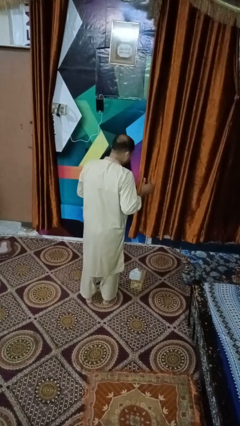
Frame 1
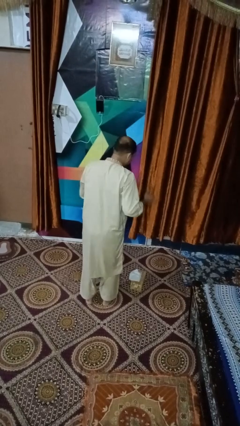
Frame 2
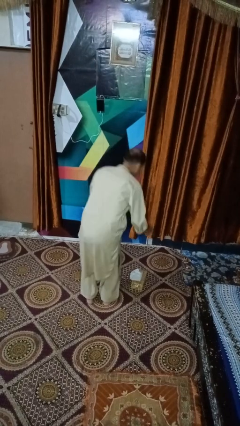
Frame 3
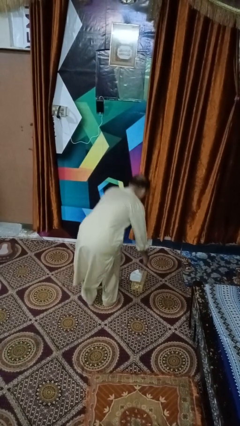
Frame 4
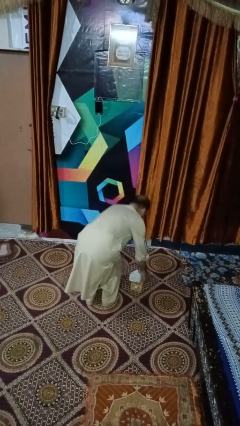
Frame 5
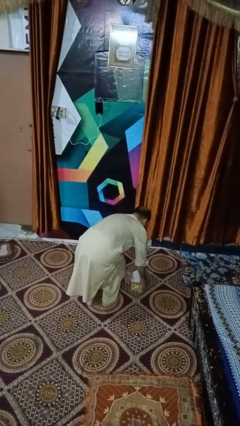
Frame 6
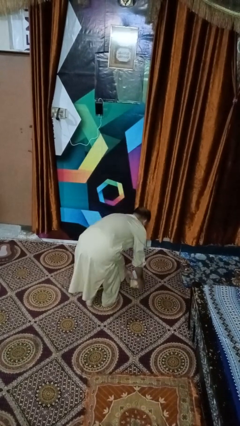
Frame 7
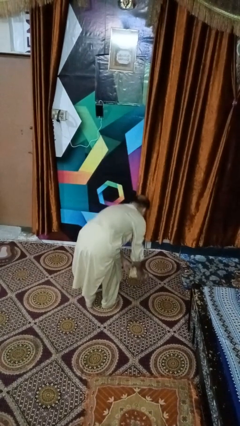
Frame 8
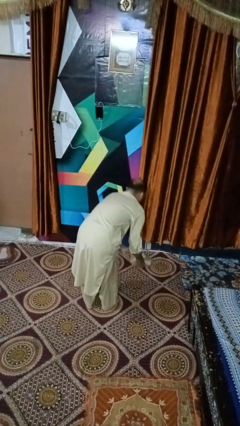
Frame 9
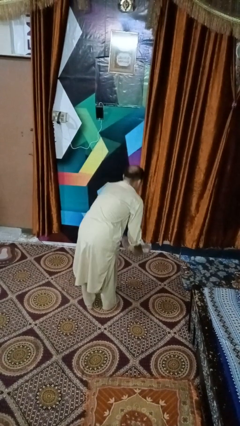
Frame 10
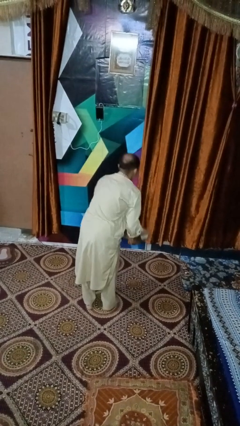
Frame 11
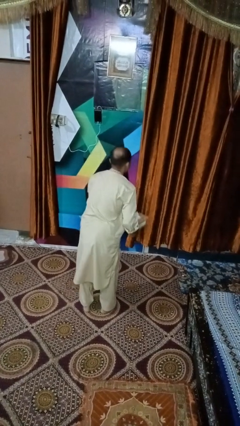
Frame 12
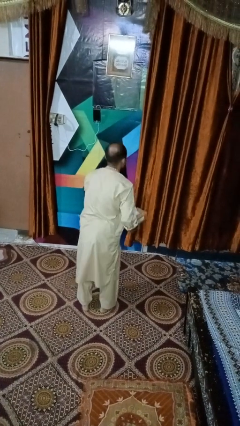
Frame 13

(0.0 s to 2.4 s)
person picks up object from floor

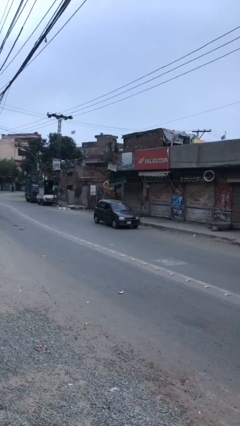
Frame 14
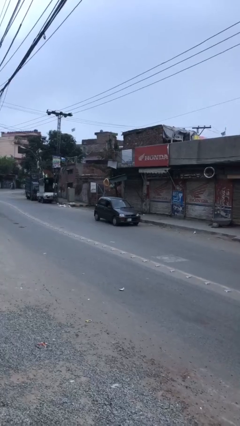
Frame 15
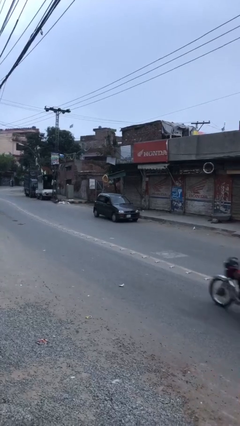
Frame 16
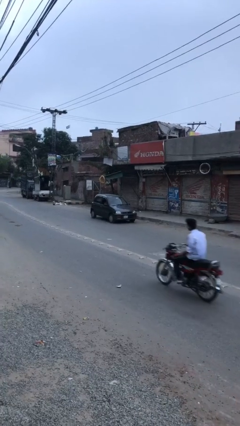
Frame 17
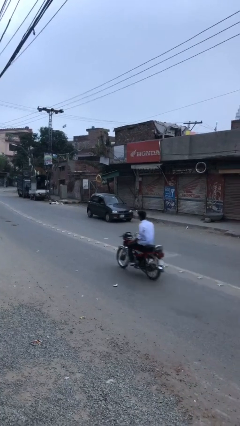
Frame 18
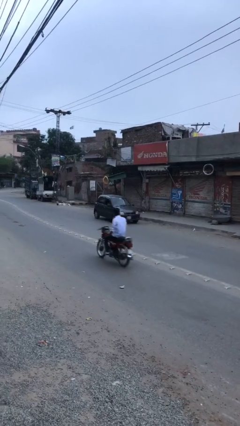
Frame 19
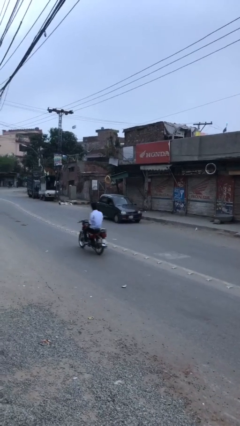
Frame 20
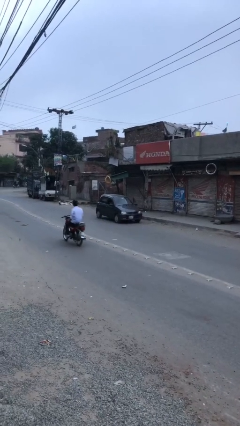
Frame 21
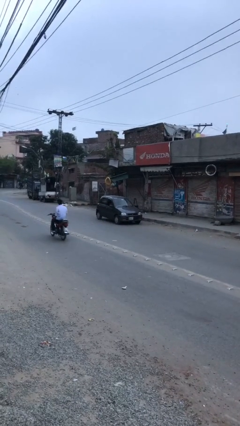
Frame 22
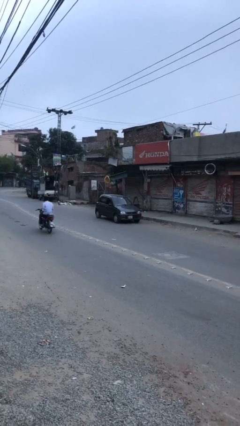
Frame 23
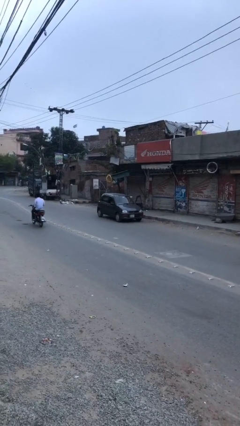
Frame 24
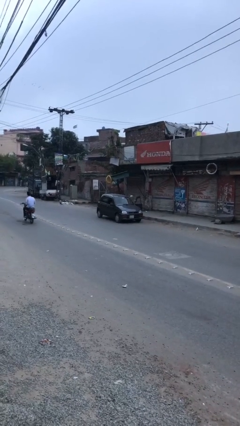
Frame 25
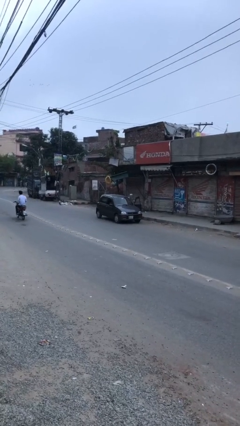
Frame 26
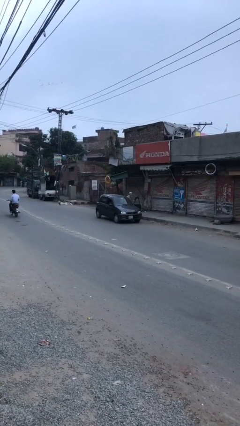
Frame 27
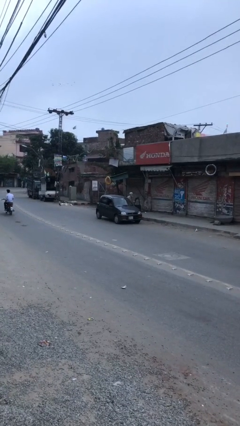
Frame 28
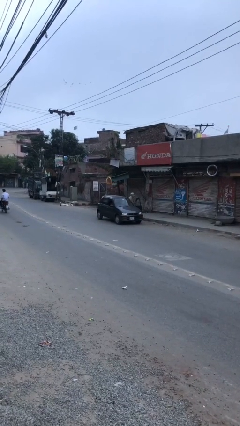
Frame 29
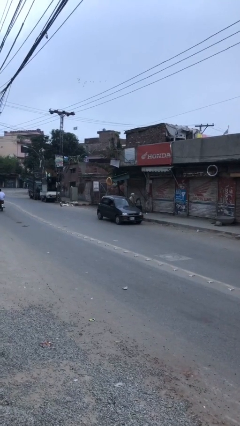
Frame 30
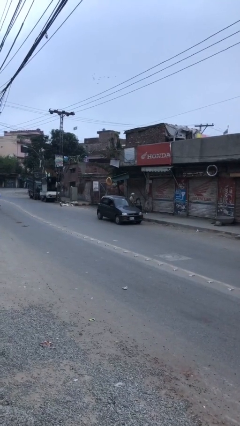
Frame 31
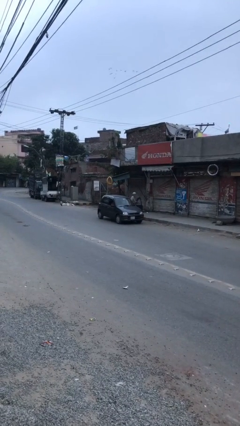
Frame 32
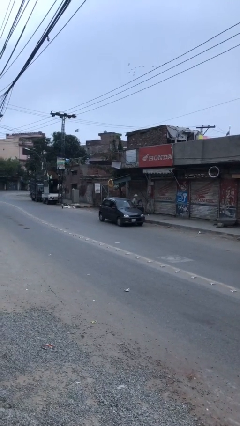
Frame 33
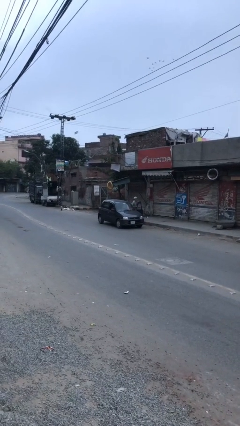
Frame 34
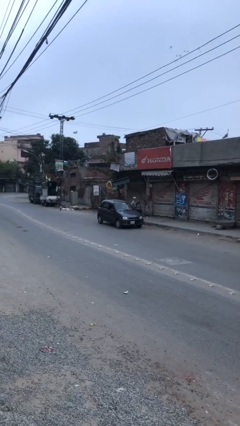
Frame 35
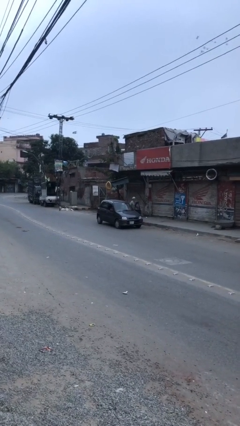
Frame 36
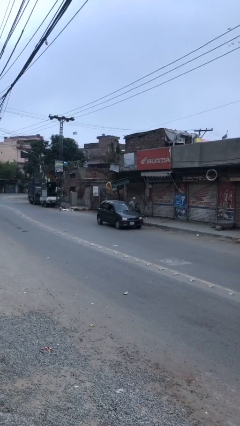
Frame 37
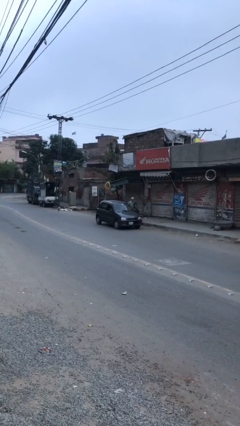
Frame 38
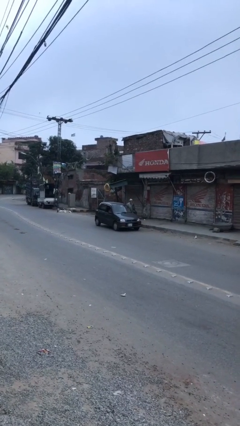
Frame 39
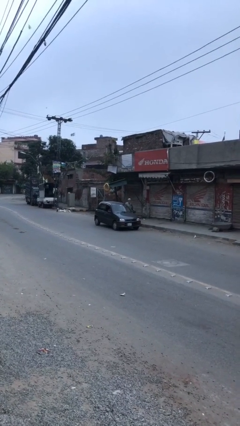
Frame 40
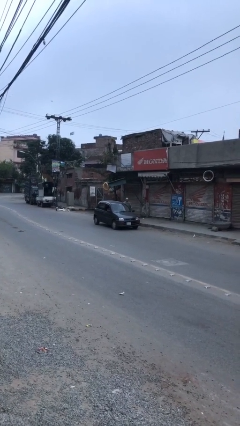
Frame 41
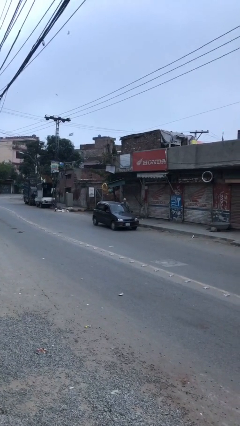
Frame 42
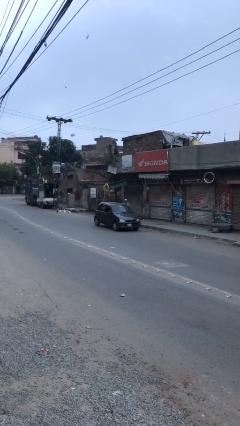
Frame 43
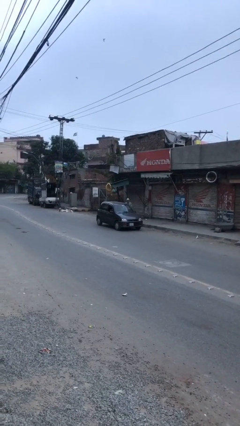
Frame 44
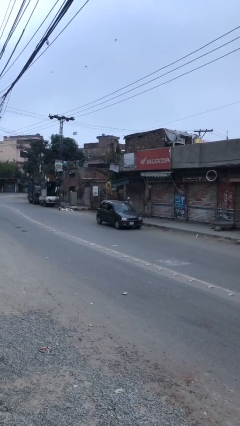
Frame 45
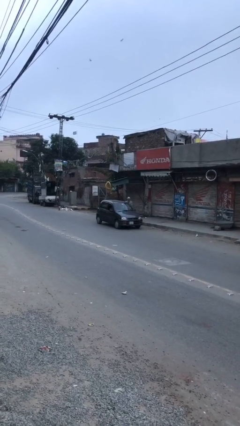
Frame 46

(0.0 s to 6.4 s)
car drops off person

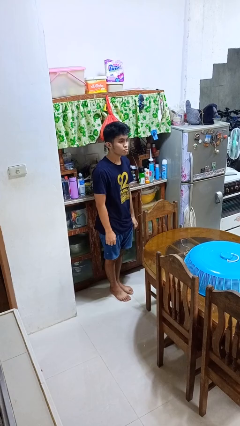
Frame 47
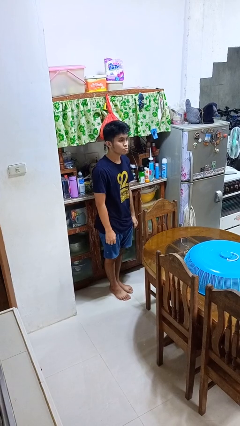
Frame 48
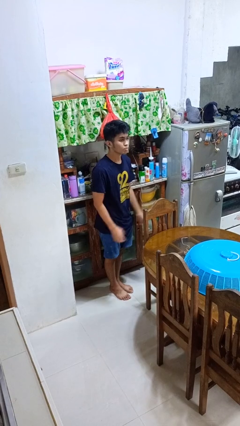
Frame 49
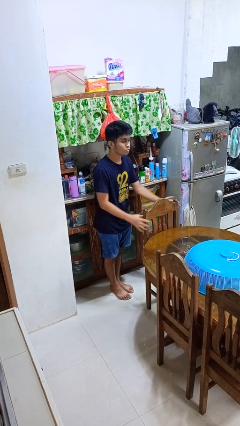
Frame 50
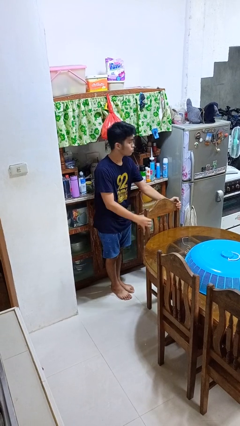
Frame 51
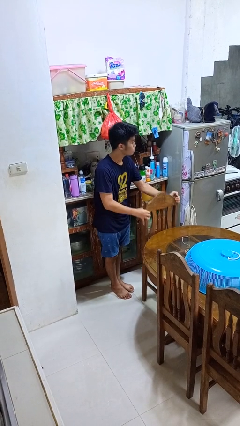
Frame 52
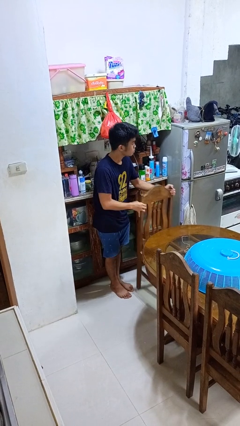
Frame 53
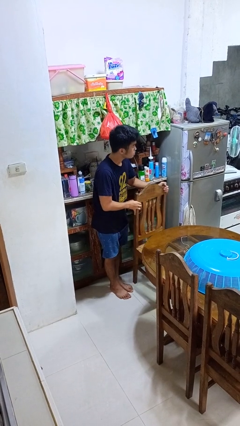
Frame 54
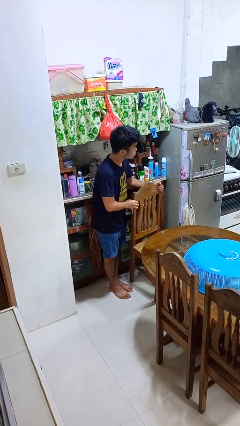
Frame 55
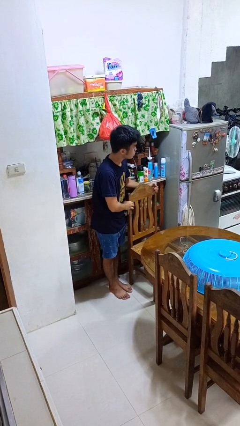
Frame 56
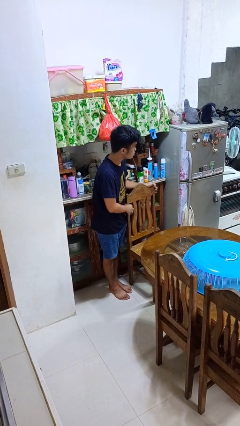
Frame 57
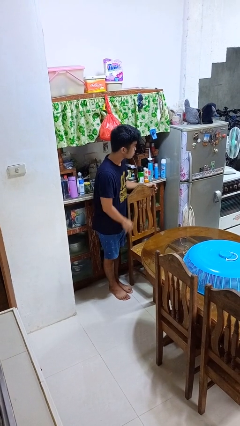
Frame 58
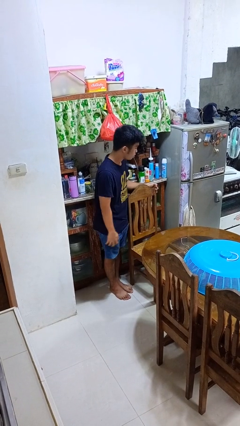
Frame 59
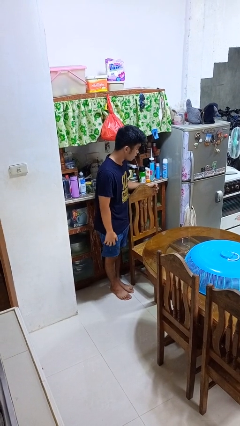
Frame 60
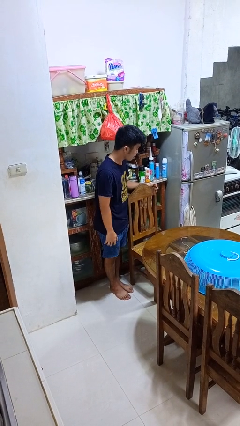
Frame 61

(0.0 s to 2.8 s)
person pulls out chair

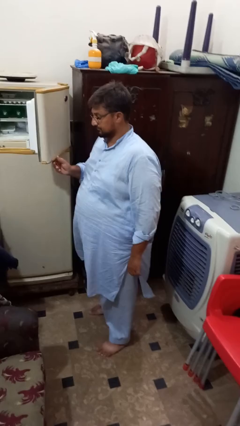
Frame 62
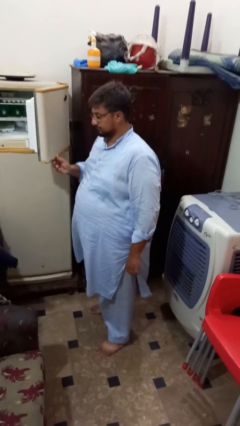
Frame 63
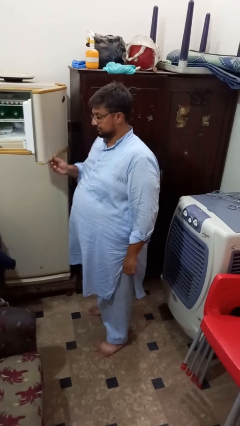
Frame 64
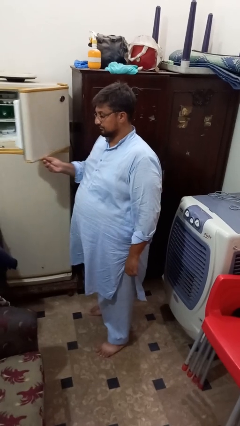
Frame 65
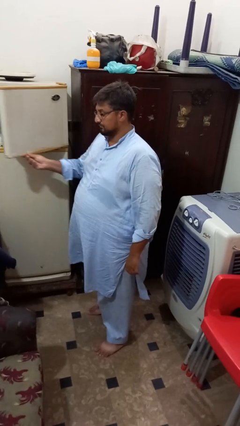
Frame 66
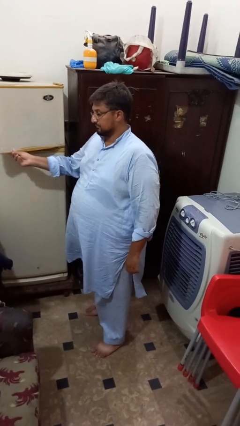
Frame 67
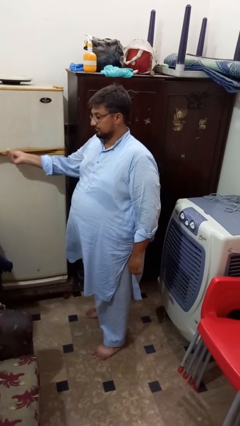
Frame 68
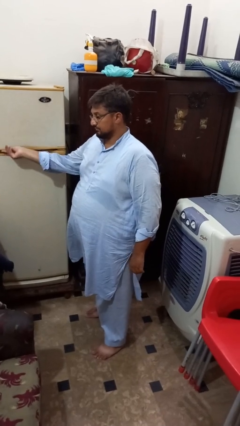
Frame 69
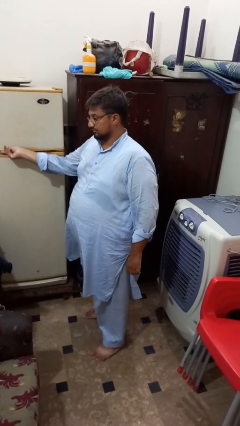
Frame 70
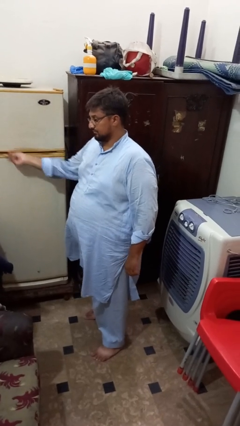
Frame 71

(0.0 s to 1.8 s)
person closes refrigerator

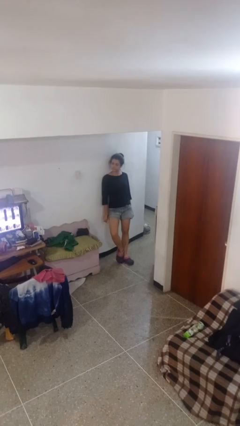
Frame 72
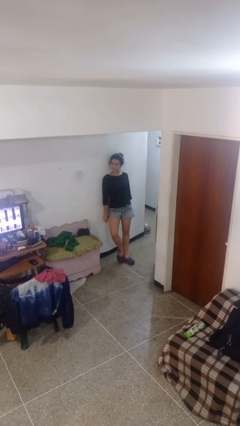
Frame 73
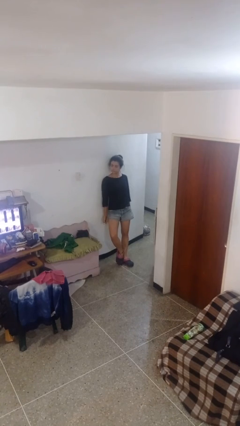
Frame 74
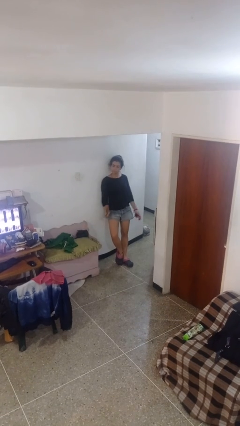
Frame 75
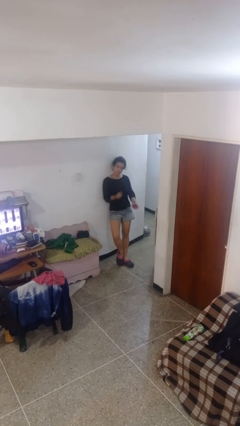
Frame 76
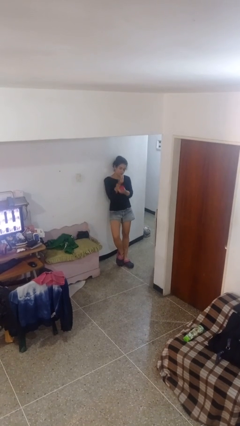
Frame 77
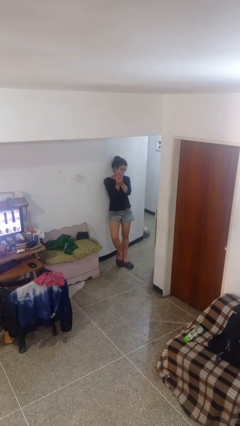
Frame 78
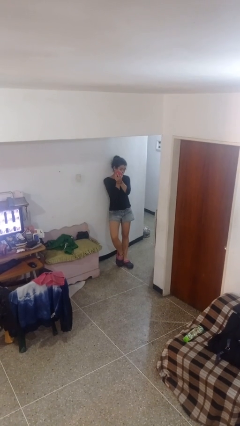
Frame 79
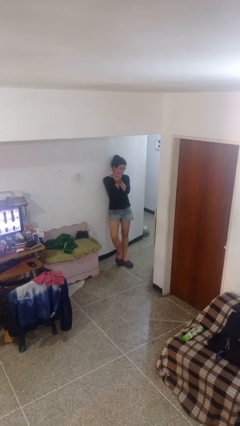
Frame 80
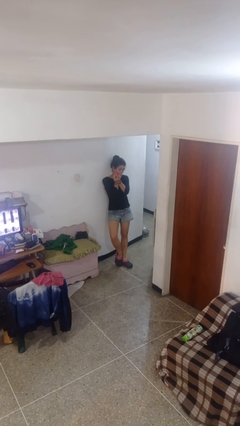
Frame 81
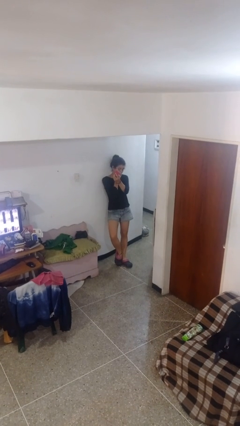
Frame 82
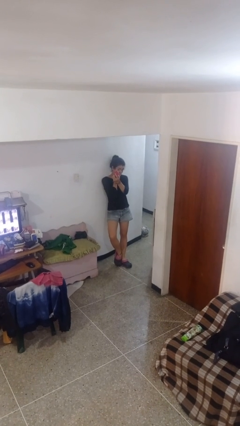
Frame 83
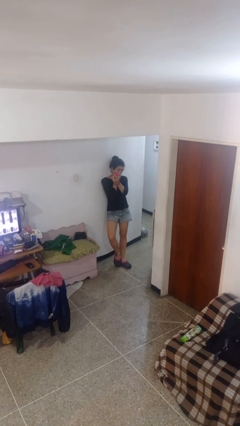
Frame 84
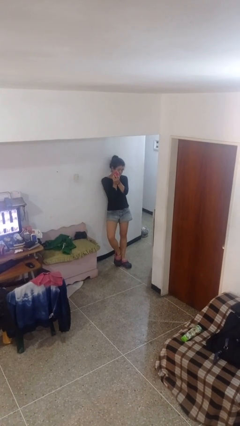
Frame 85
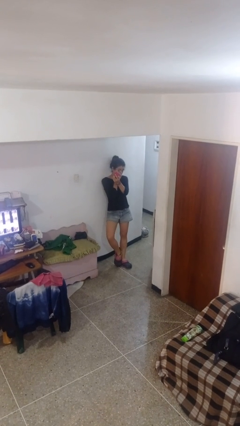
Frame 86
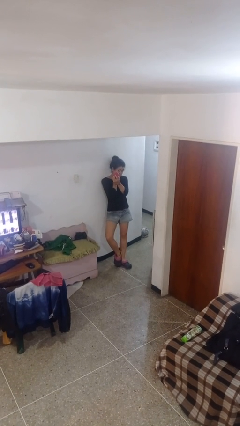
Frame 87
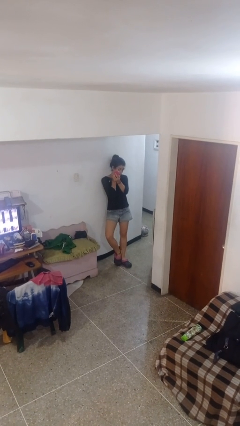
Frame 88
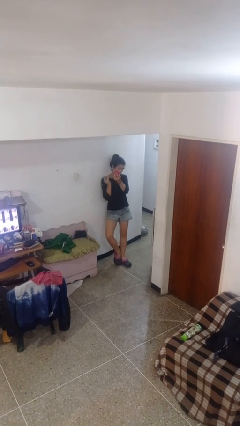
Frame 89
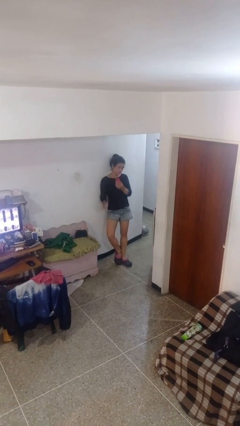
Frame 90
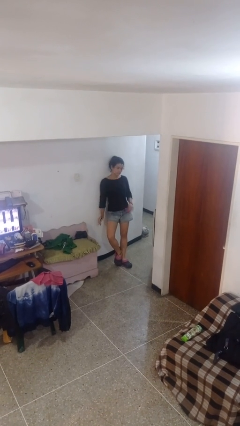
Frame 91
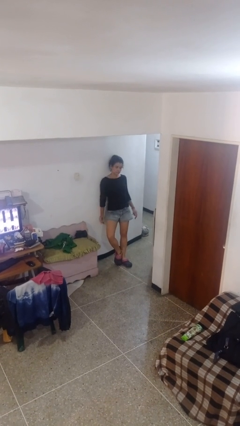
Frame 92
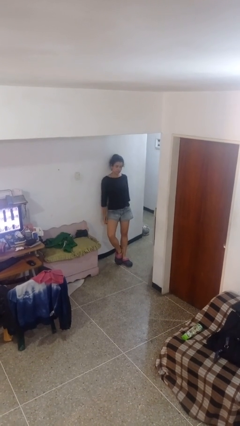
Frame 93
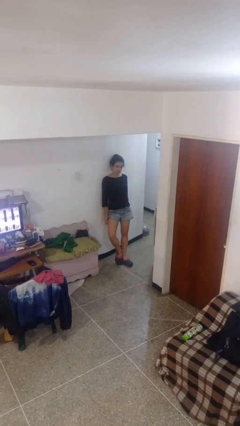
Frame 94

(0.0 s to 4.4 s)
person applies eye makeup
